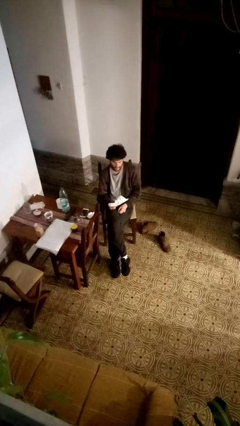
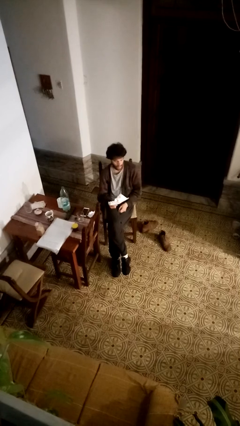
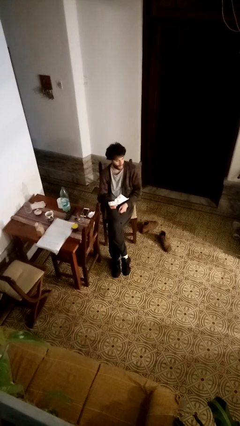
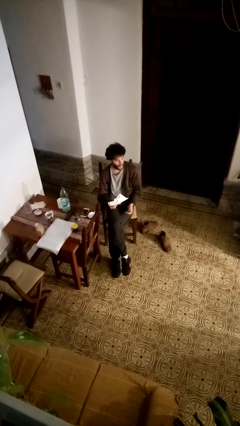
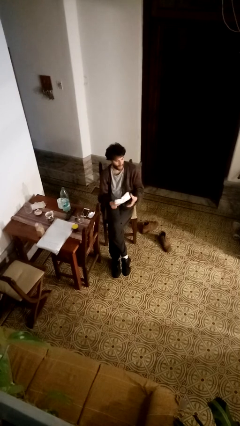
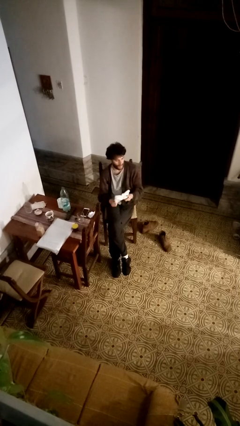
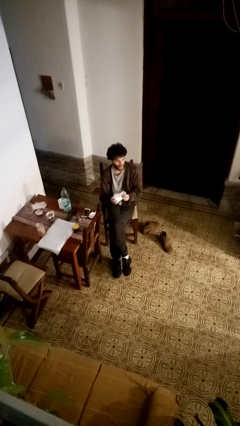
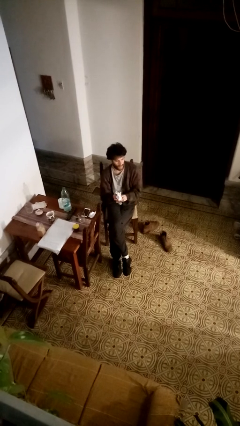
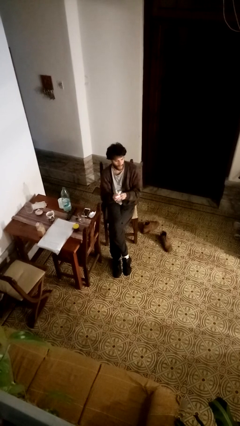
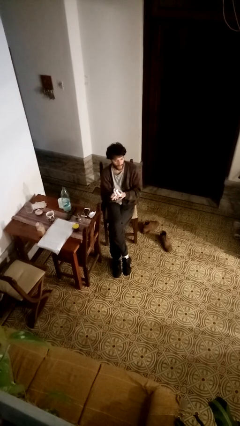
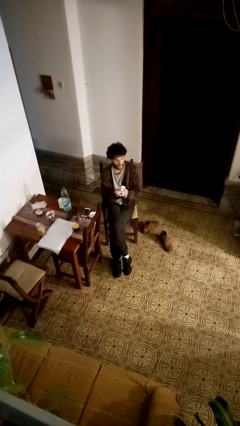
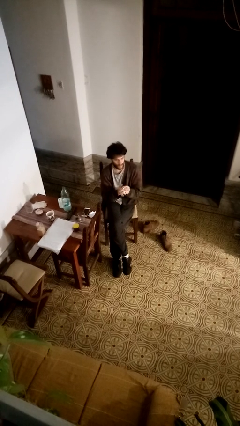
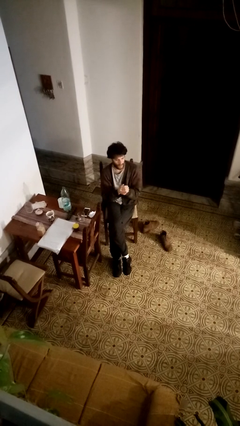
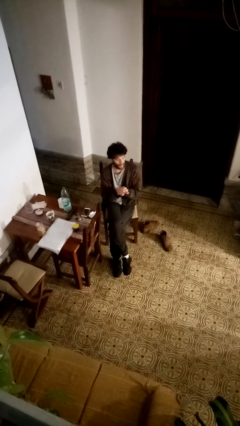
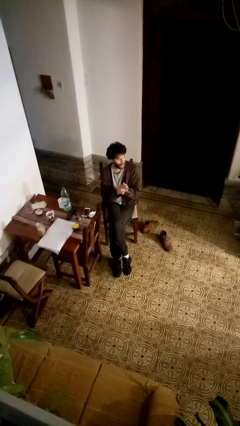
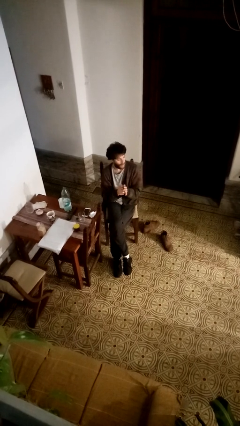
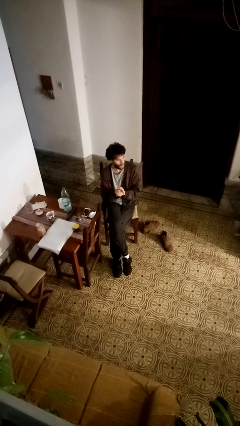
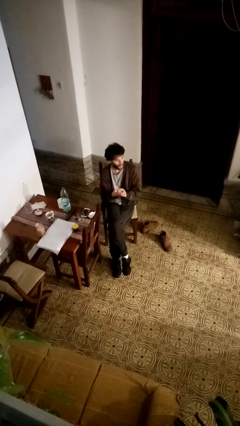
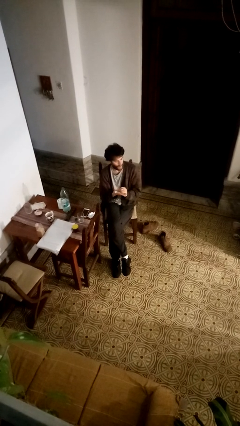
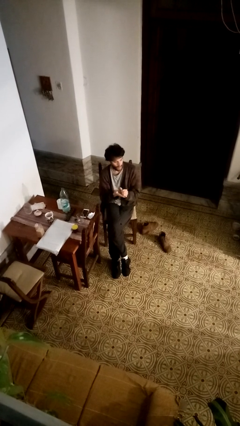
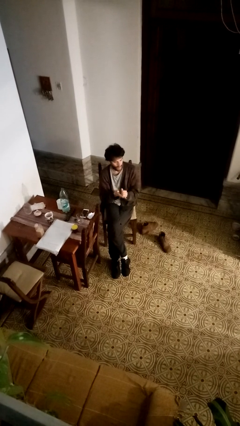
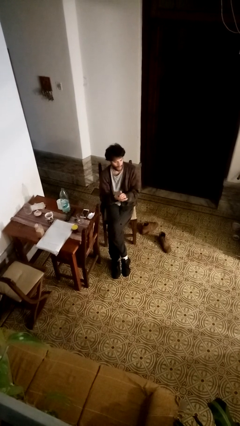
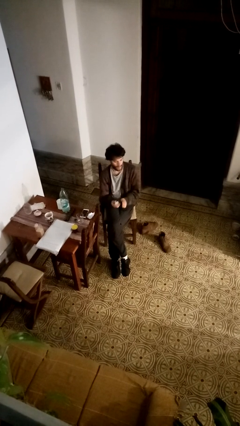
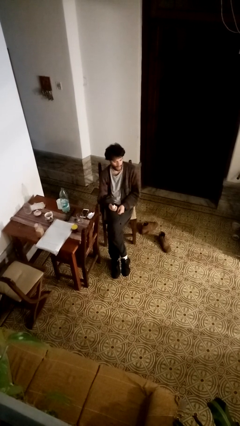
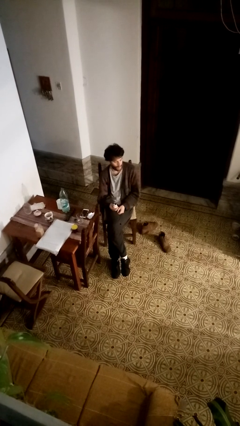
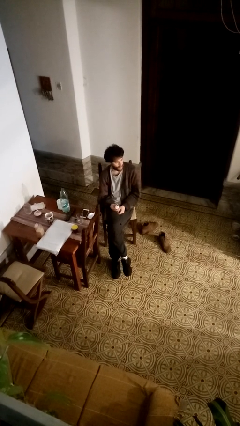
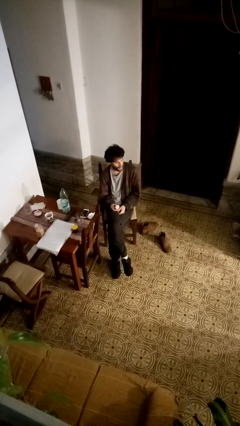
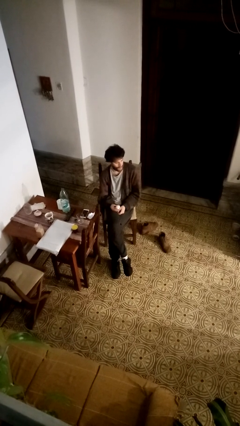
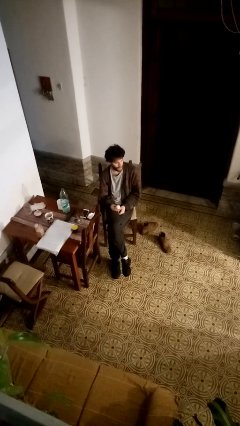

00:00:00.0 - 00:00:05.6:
person crumples paper

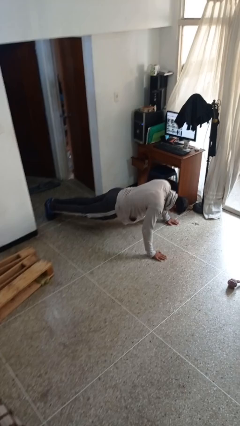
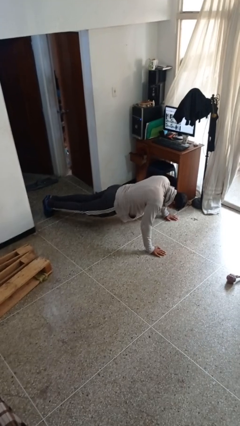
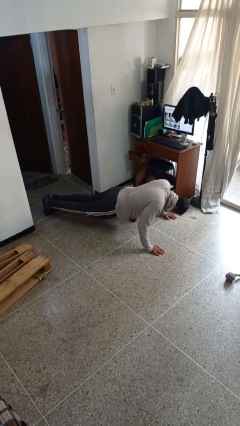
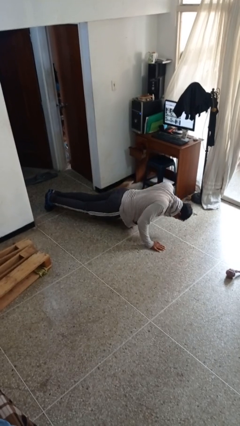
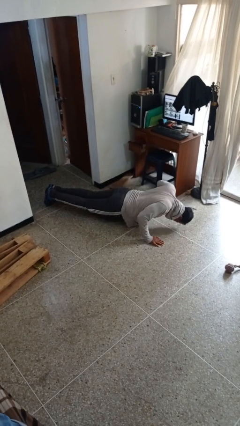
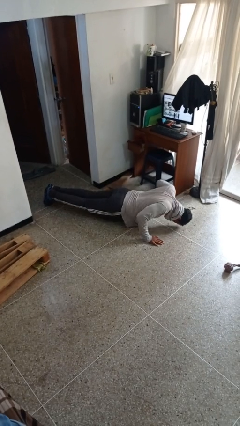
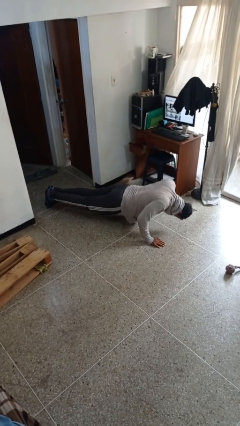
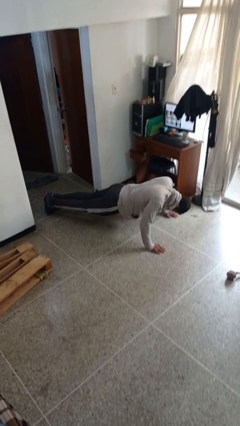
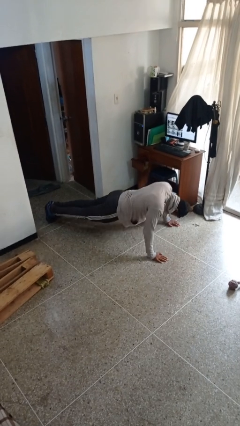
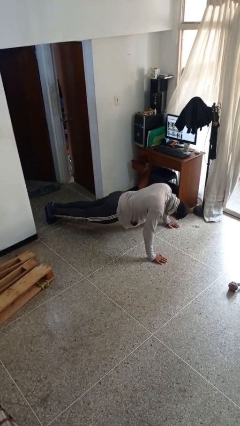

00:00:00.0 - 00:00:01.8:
person exercises with pushup

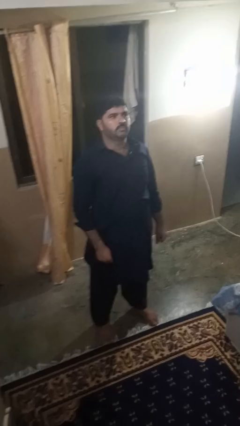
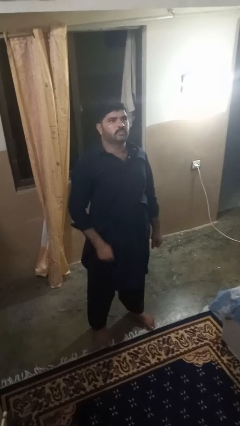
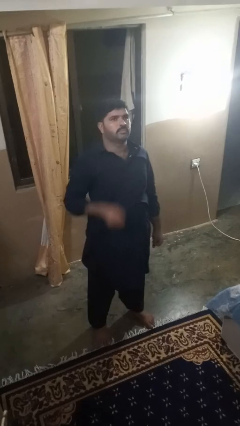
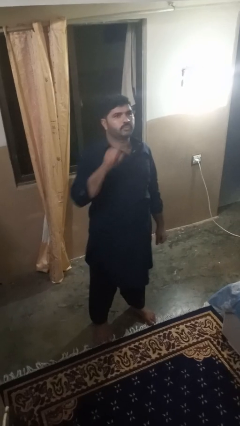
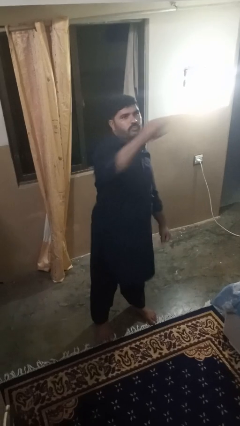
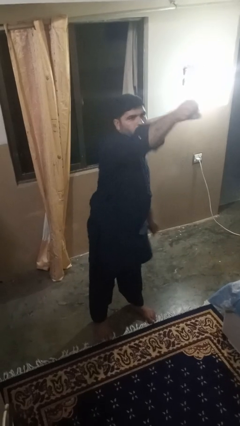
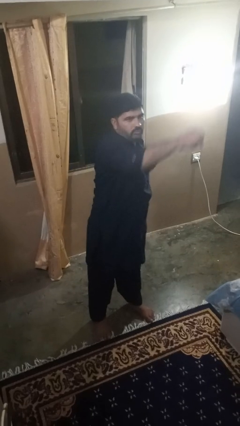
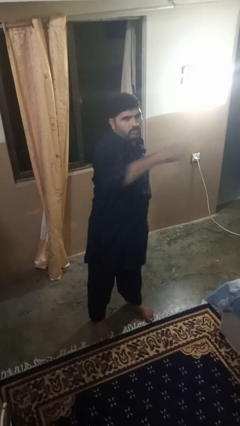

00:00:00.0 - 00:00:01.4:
person punches

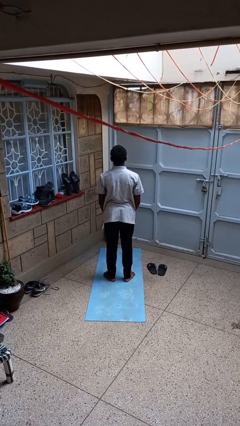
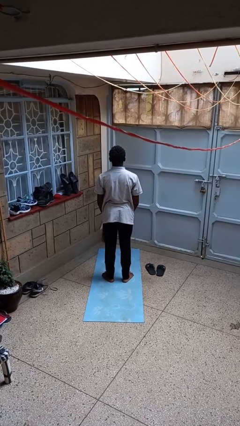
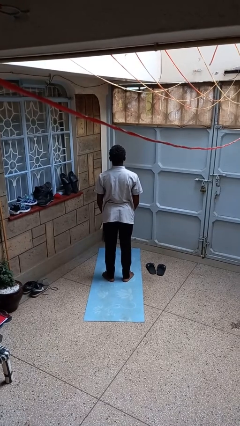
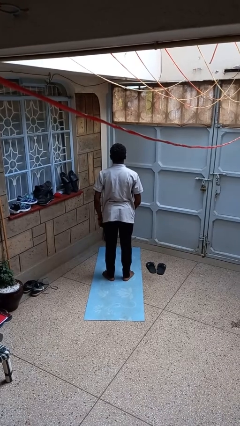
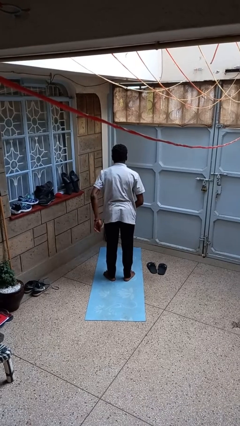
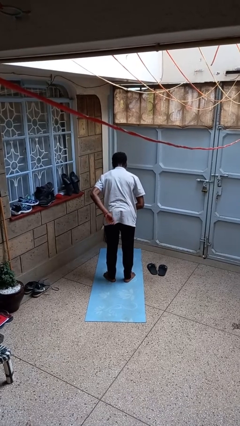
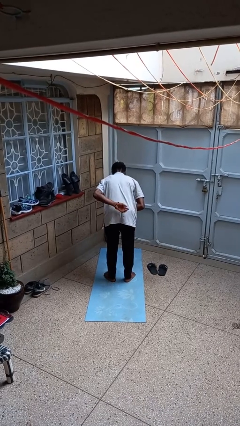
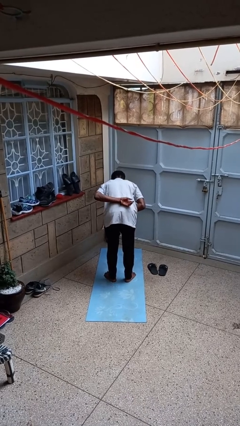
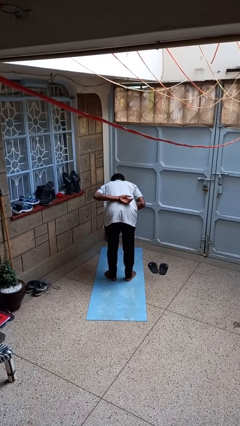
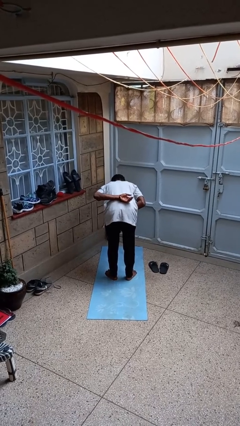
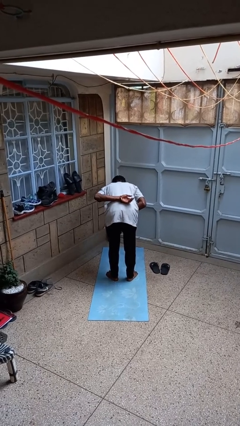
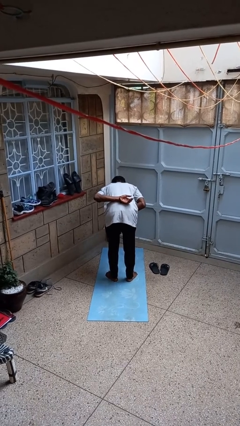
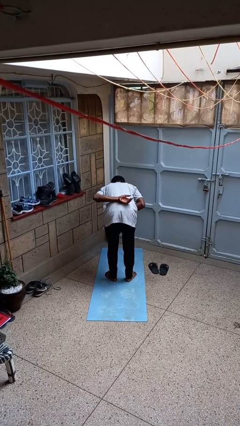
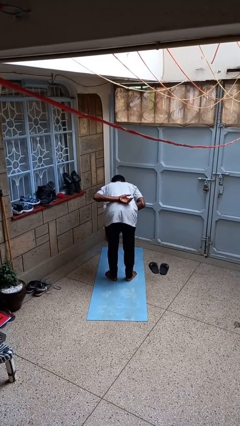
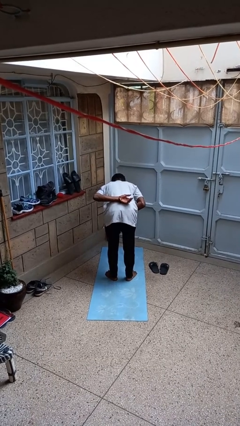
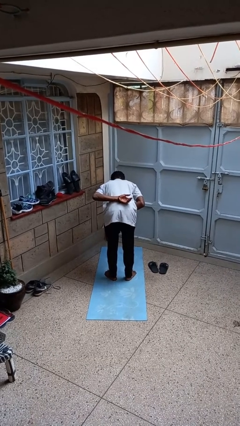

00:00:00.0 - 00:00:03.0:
person bows

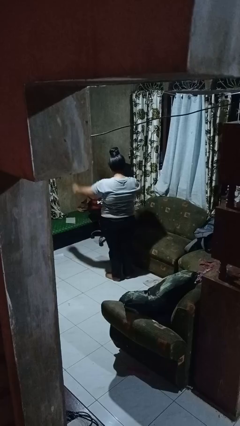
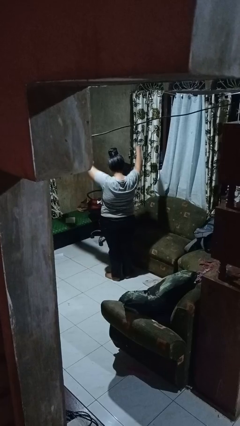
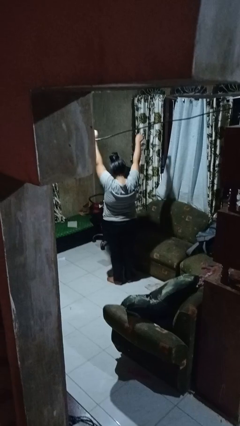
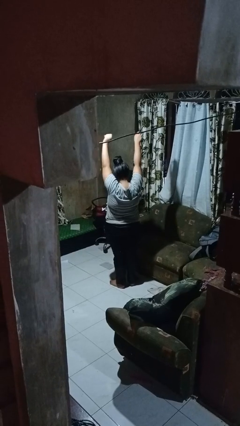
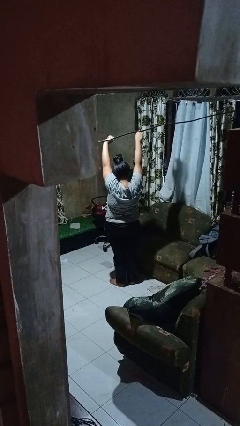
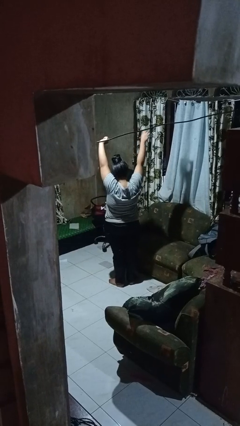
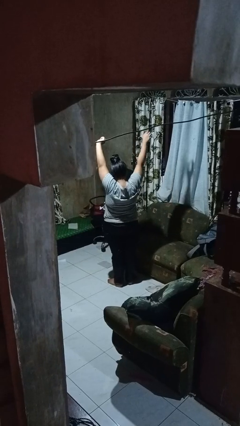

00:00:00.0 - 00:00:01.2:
person stretches arms over head

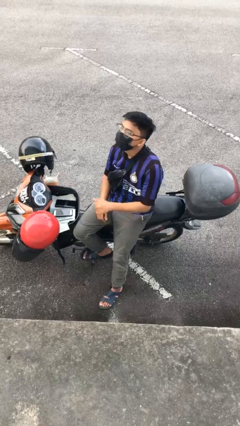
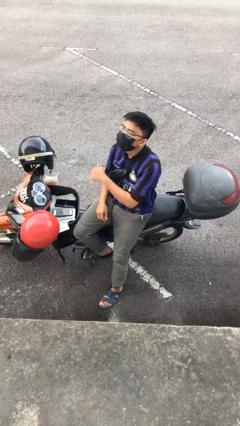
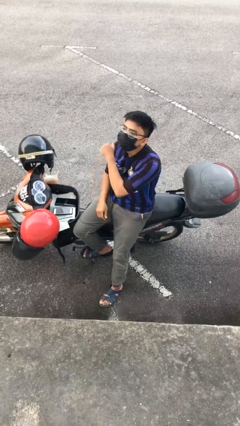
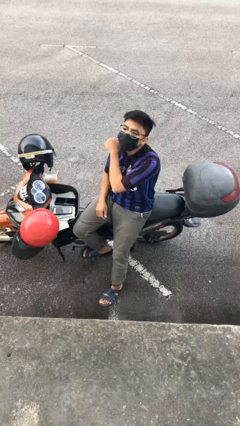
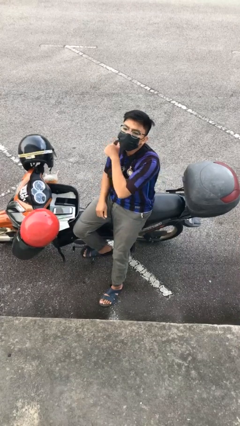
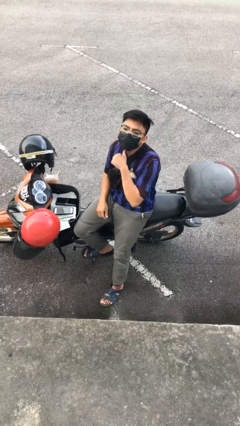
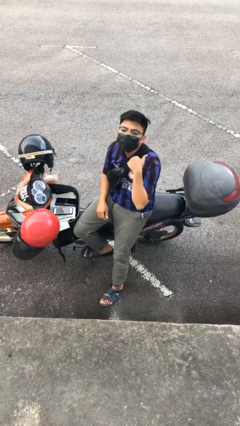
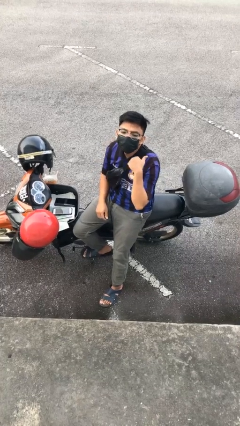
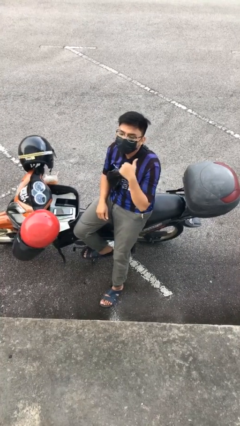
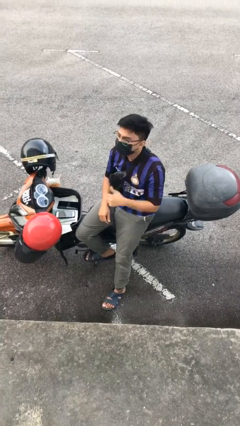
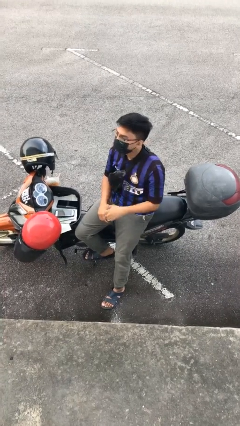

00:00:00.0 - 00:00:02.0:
person gestures cut

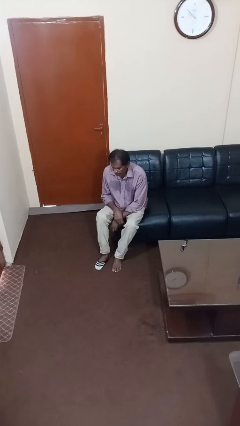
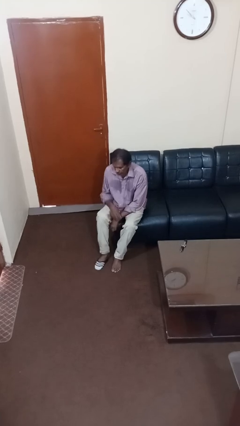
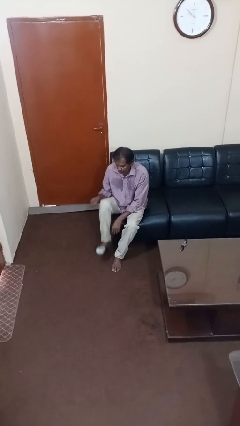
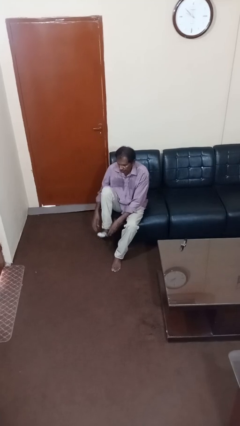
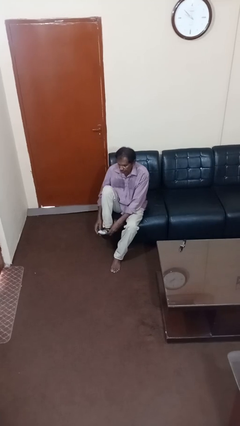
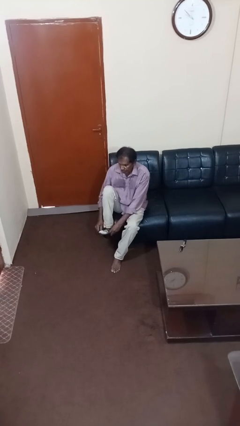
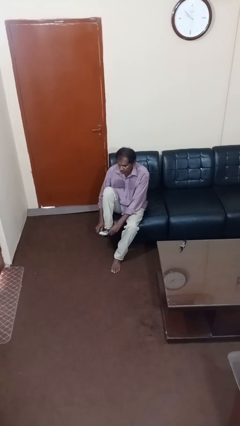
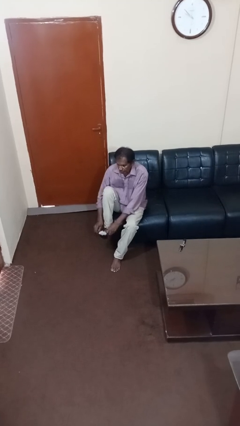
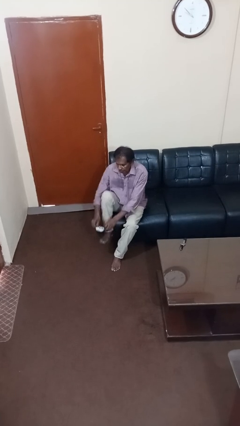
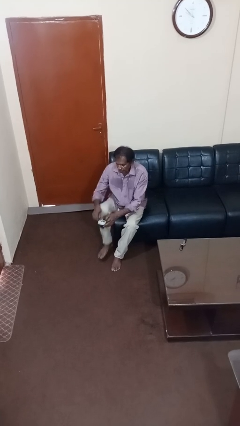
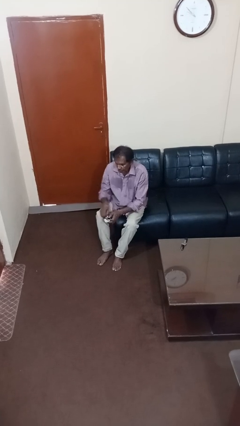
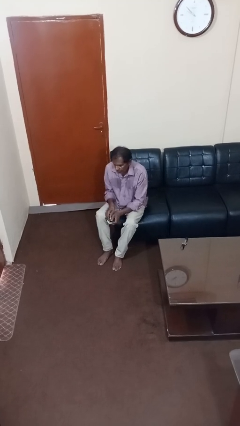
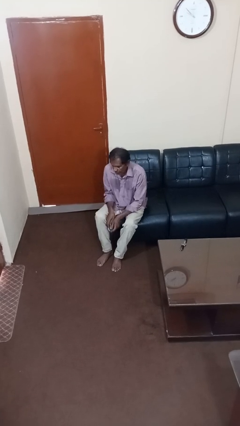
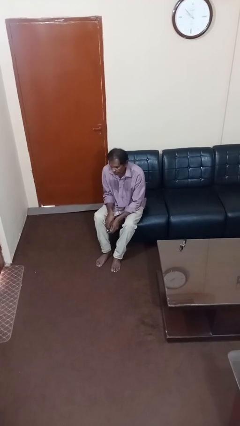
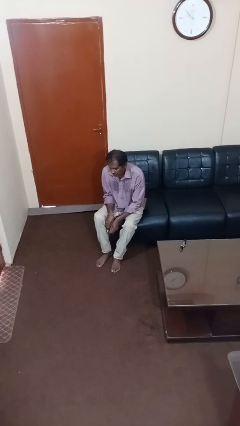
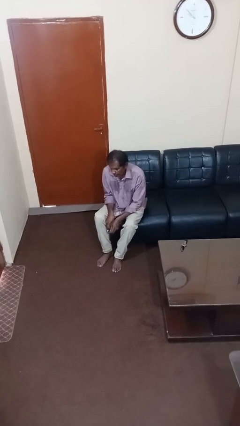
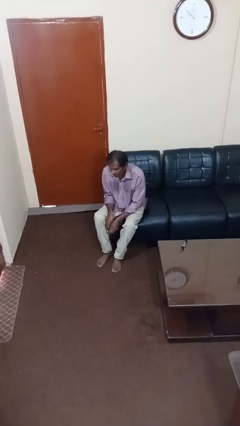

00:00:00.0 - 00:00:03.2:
person takes off socks
